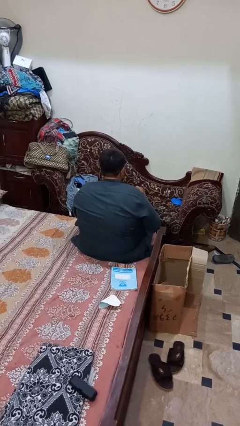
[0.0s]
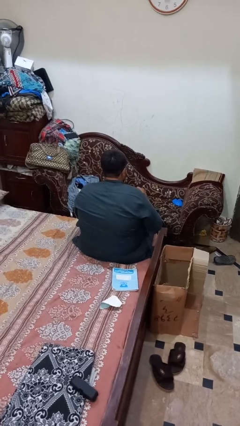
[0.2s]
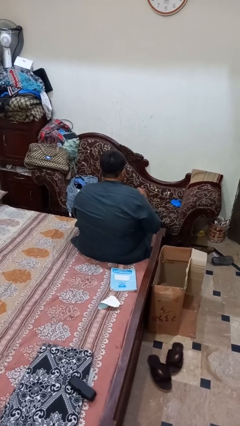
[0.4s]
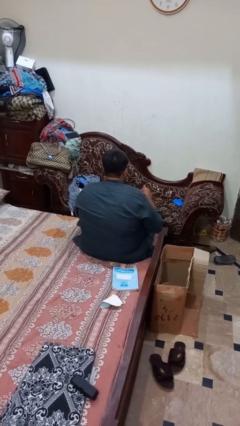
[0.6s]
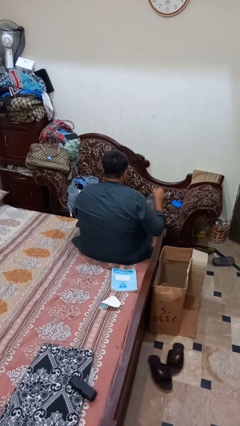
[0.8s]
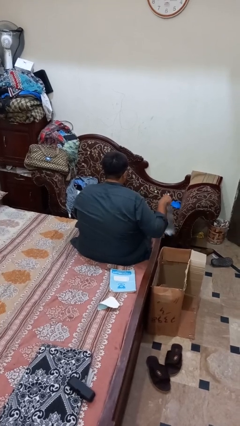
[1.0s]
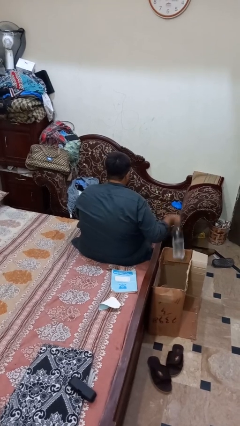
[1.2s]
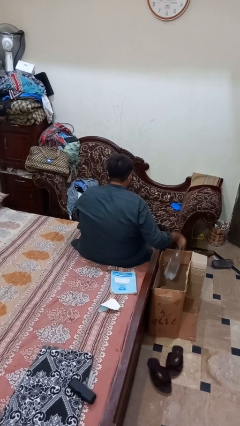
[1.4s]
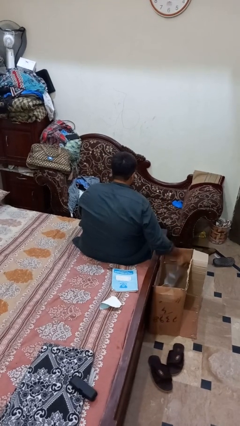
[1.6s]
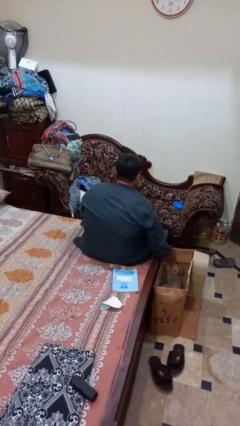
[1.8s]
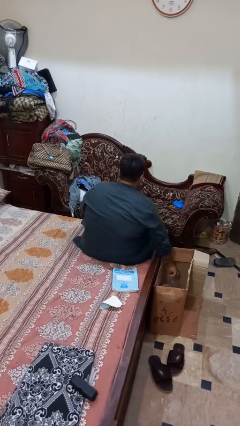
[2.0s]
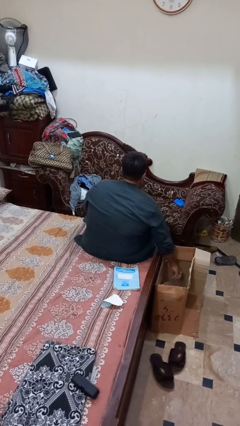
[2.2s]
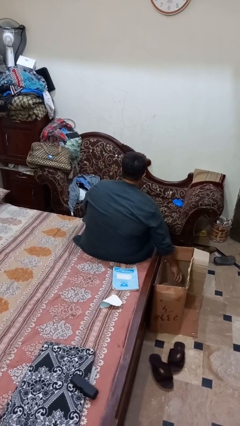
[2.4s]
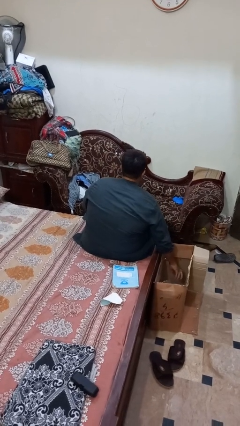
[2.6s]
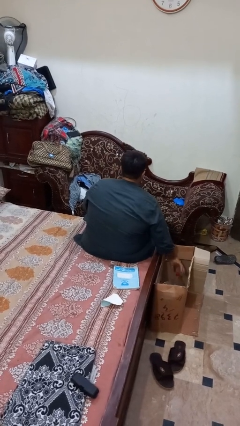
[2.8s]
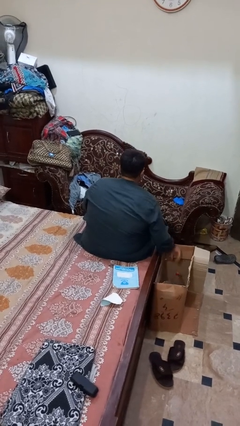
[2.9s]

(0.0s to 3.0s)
person puts object into box

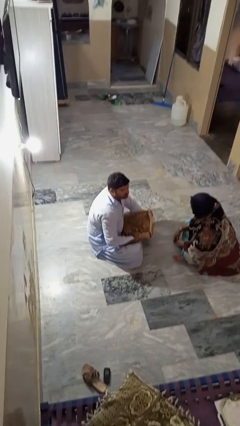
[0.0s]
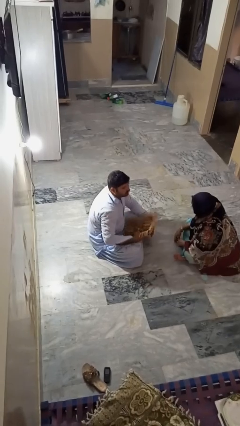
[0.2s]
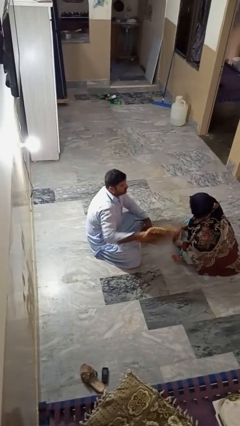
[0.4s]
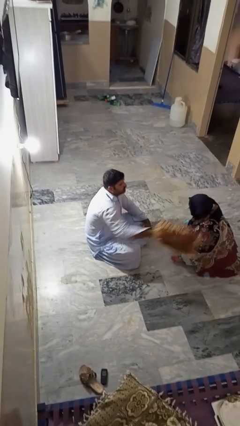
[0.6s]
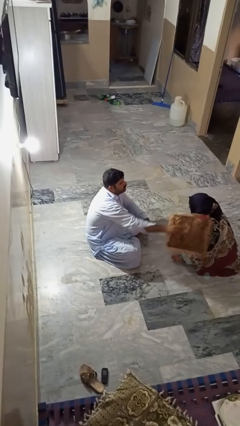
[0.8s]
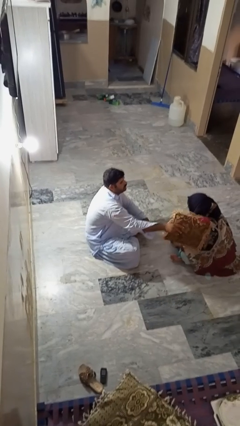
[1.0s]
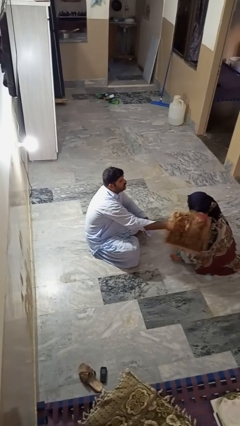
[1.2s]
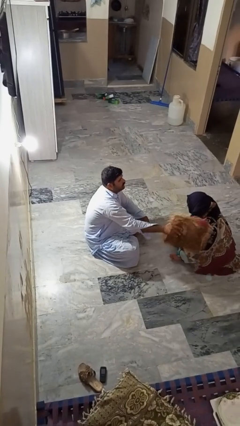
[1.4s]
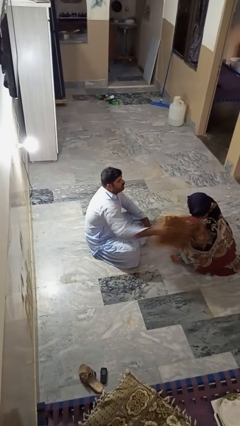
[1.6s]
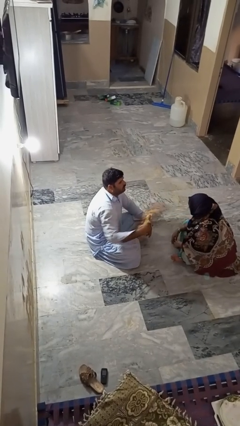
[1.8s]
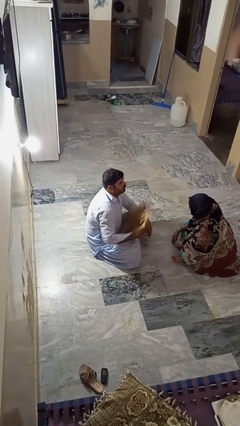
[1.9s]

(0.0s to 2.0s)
person hits person with pillow

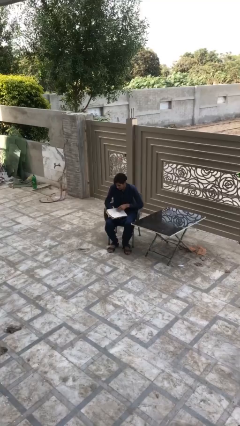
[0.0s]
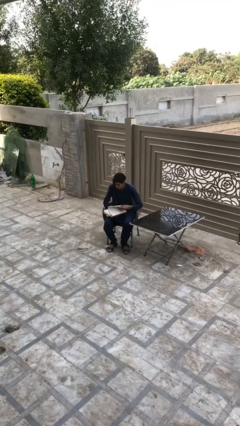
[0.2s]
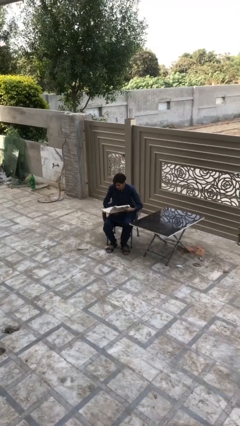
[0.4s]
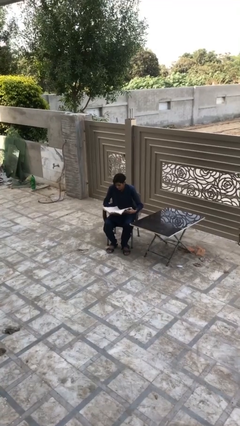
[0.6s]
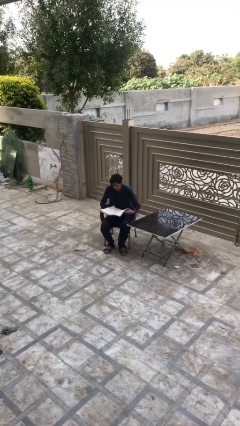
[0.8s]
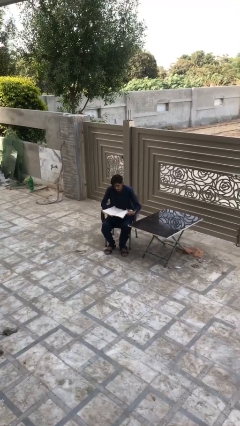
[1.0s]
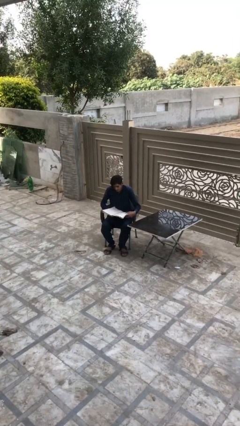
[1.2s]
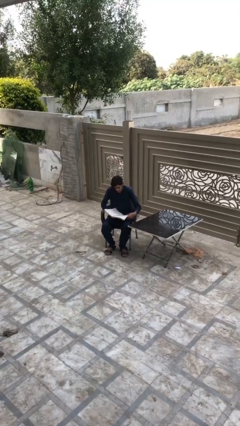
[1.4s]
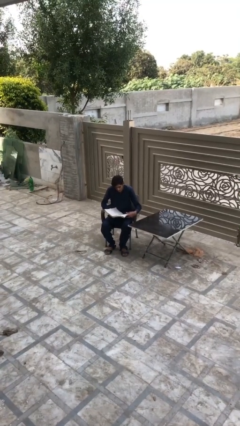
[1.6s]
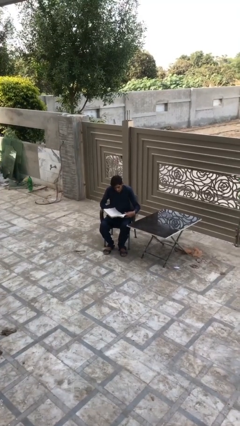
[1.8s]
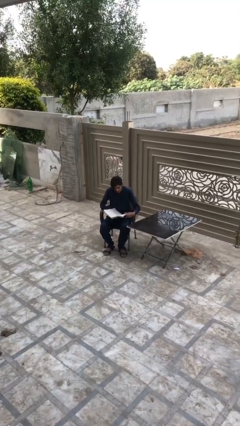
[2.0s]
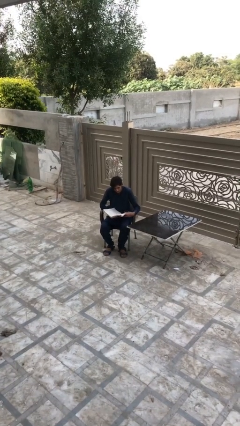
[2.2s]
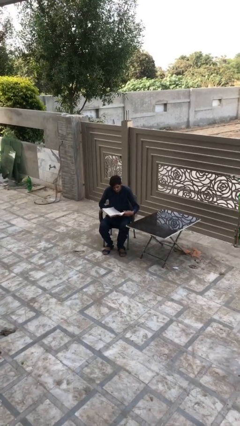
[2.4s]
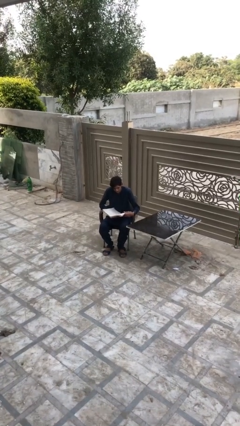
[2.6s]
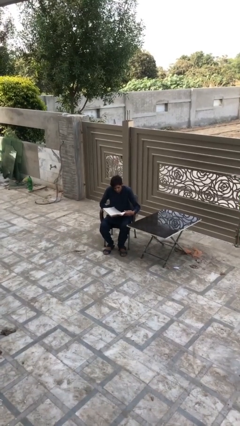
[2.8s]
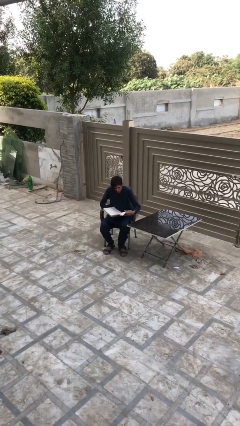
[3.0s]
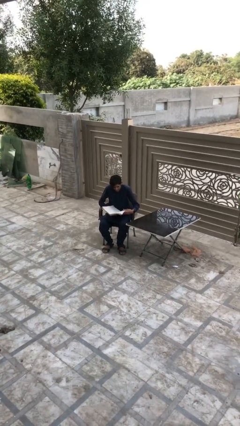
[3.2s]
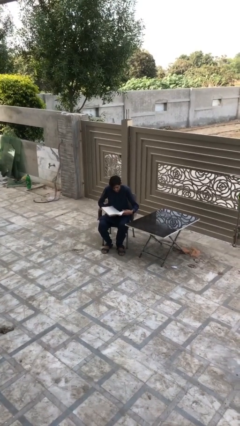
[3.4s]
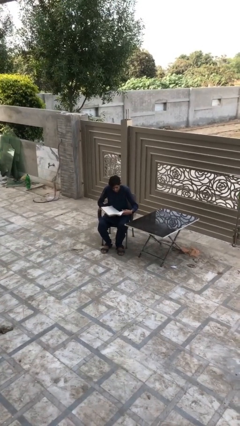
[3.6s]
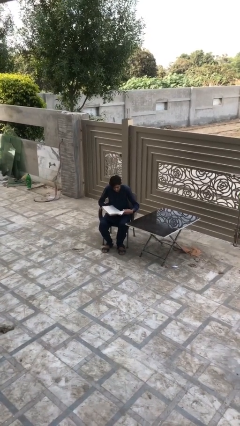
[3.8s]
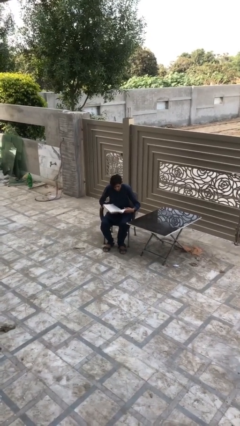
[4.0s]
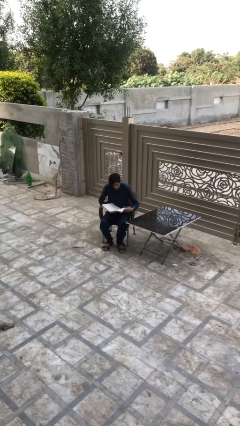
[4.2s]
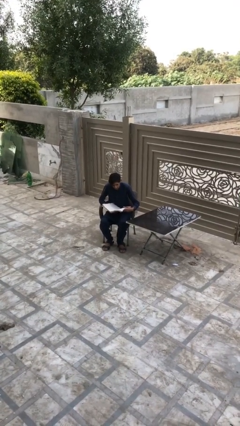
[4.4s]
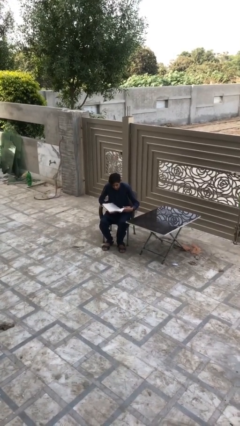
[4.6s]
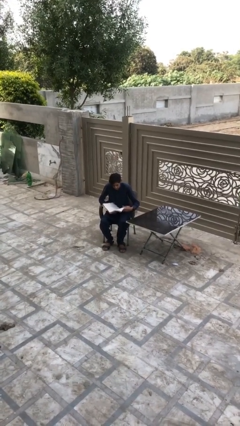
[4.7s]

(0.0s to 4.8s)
person reads document

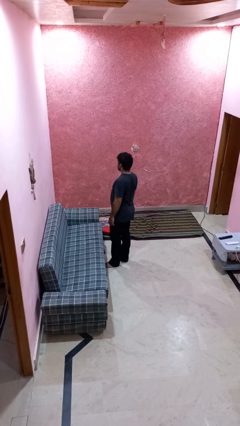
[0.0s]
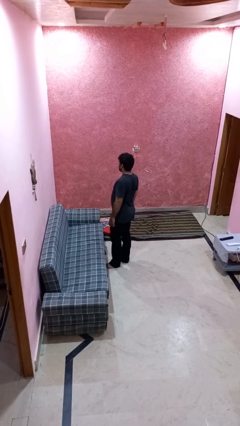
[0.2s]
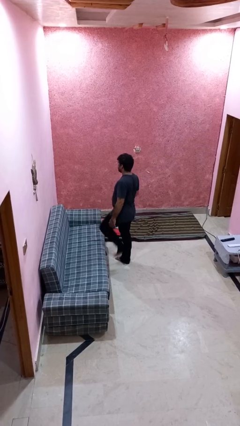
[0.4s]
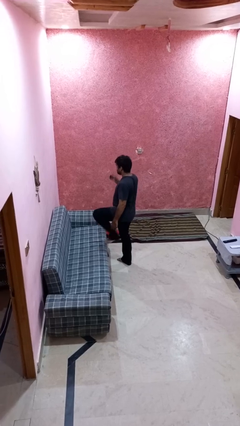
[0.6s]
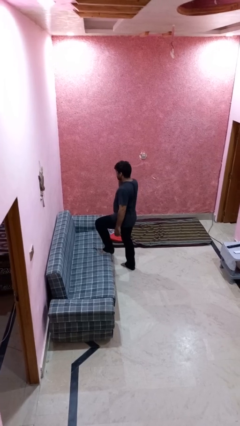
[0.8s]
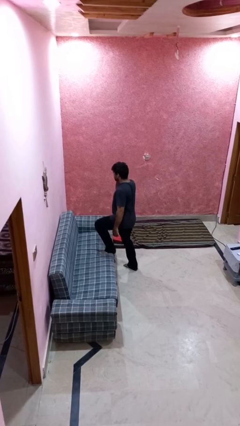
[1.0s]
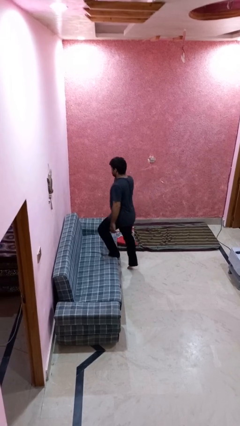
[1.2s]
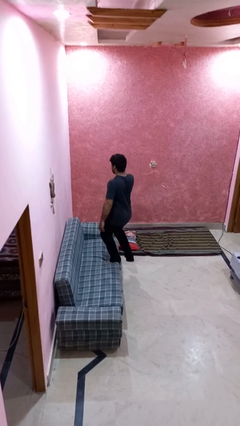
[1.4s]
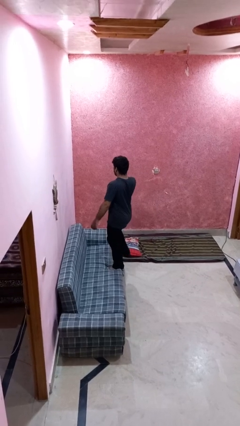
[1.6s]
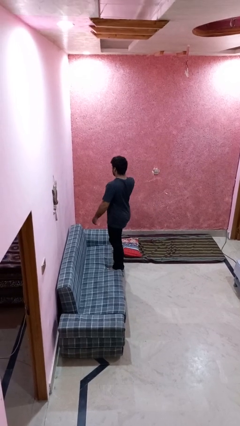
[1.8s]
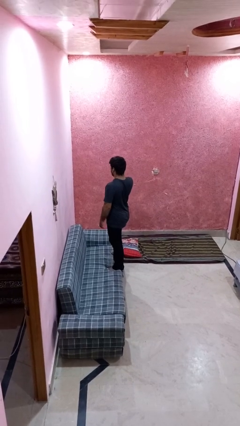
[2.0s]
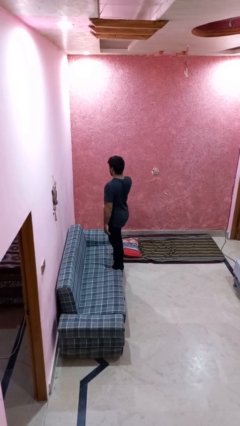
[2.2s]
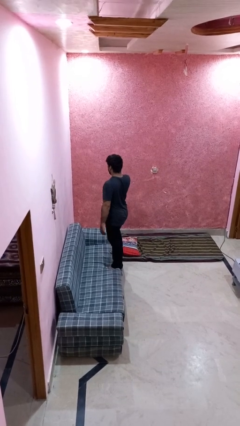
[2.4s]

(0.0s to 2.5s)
person climbs on couch

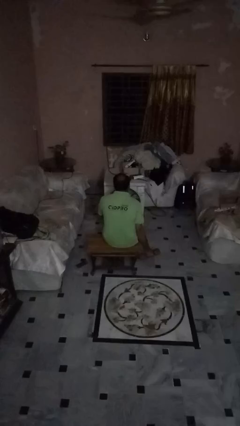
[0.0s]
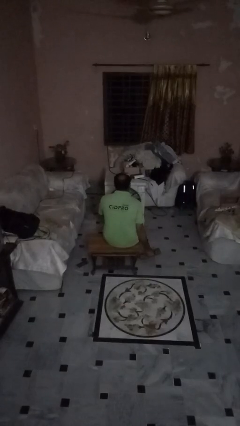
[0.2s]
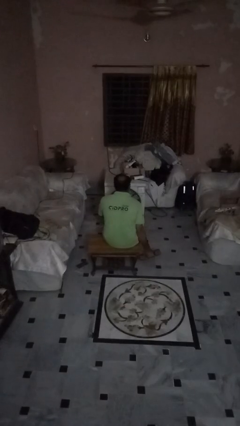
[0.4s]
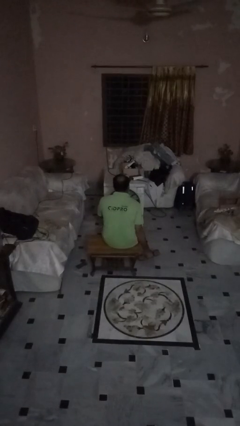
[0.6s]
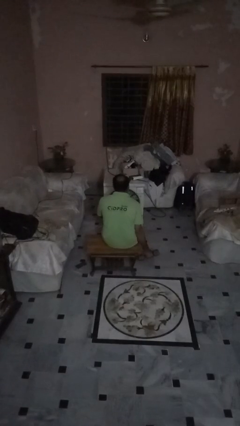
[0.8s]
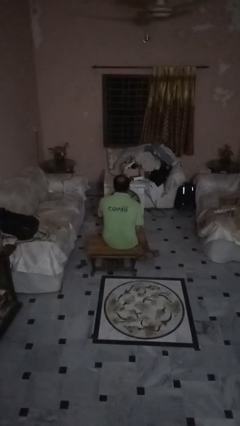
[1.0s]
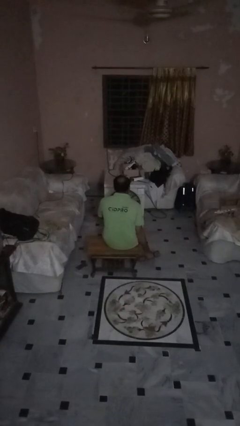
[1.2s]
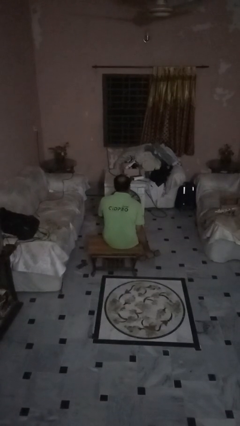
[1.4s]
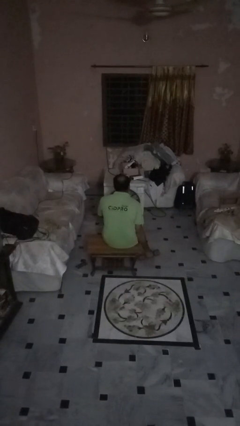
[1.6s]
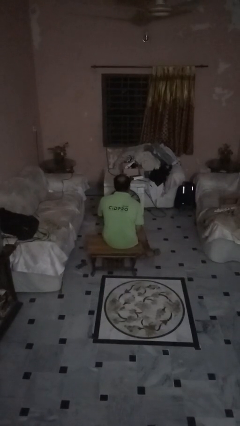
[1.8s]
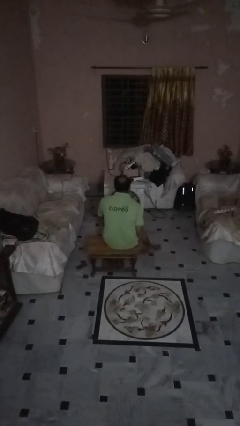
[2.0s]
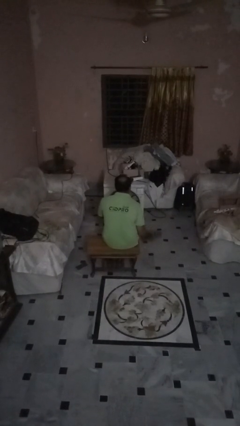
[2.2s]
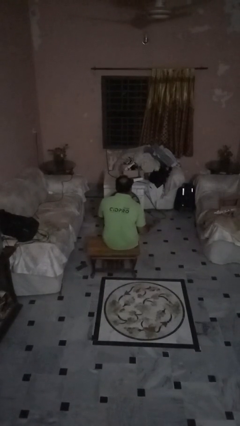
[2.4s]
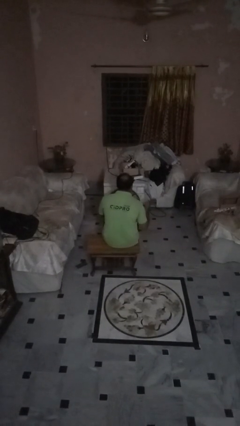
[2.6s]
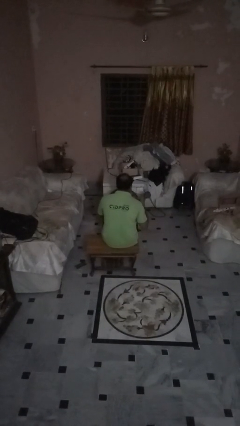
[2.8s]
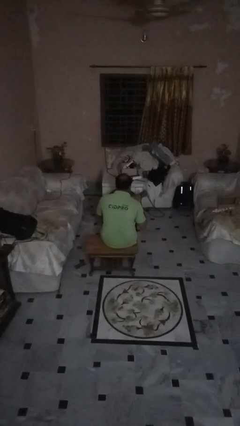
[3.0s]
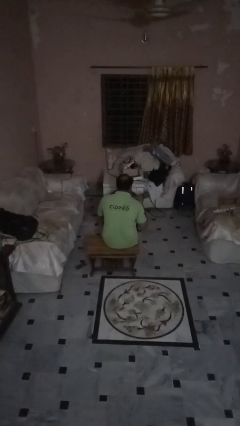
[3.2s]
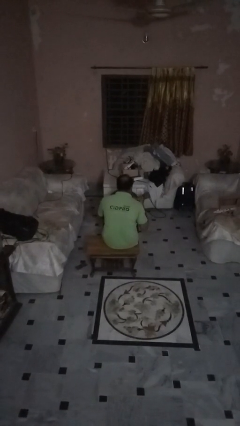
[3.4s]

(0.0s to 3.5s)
person lifts dumbbells

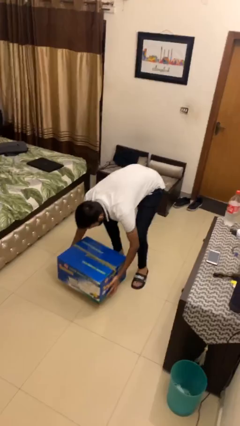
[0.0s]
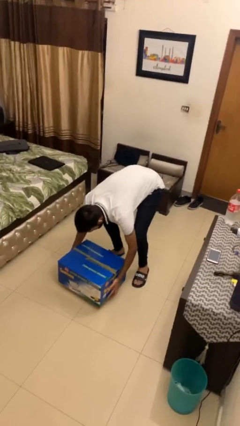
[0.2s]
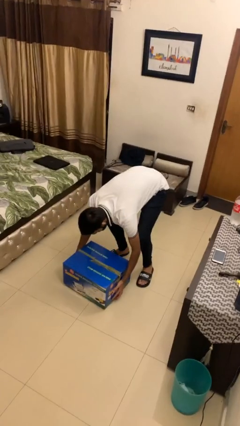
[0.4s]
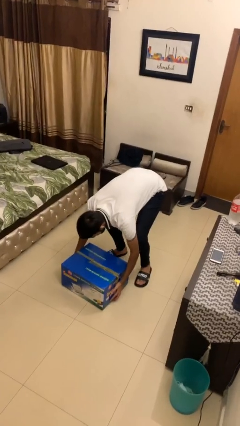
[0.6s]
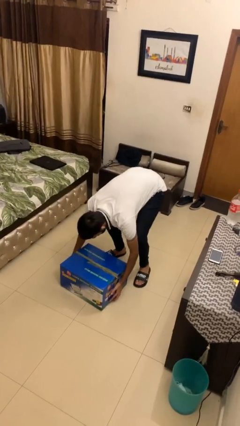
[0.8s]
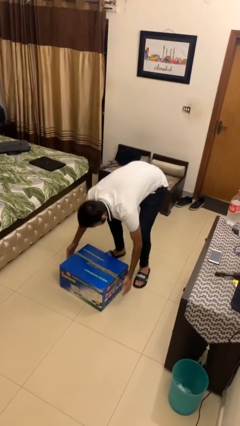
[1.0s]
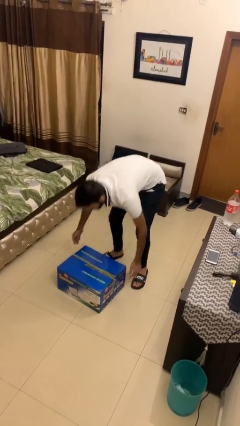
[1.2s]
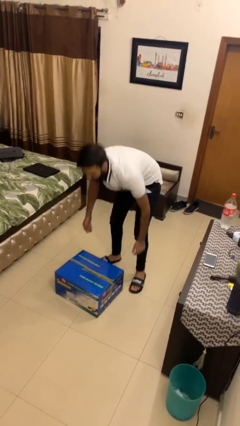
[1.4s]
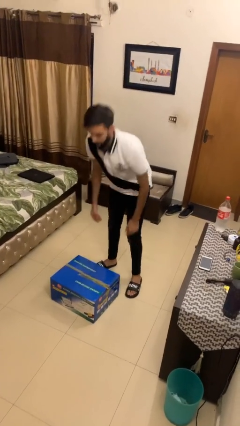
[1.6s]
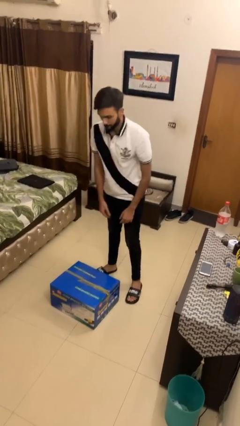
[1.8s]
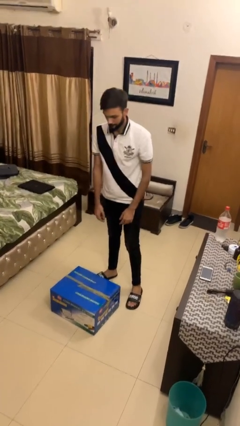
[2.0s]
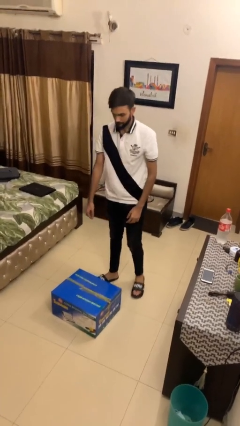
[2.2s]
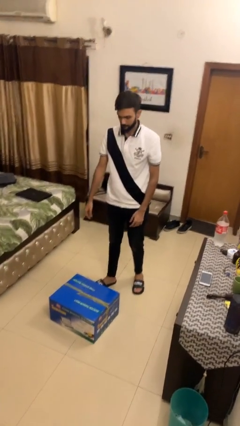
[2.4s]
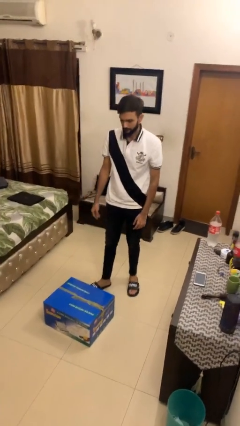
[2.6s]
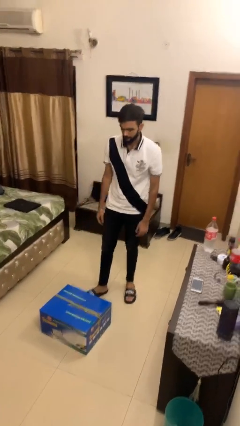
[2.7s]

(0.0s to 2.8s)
person puts down object on floor
